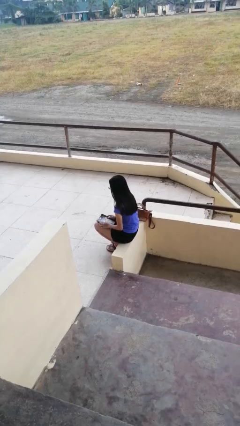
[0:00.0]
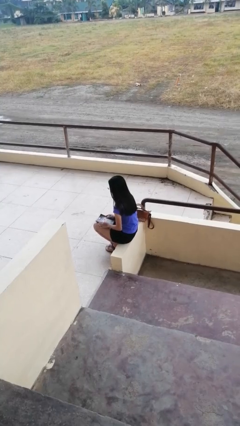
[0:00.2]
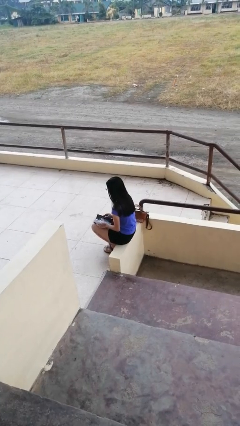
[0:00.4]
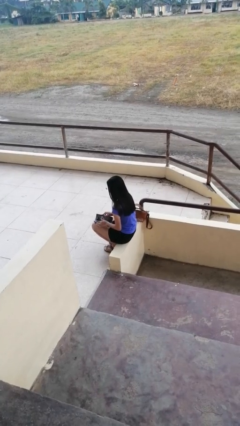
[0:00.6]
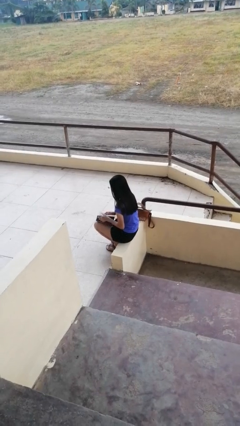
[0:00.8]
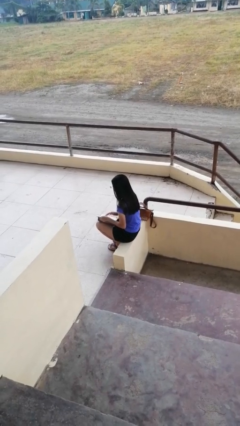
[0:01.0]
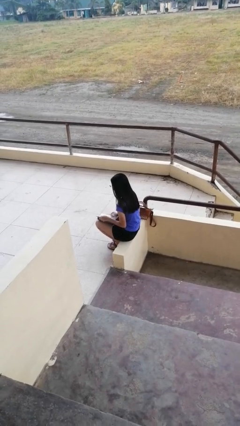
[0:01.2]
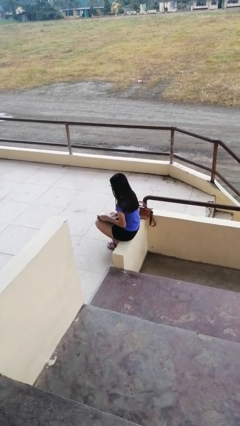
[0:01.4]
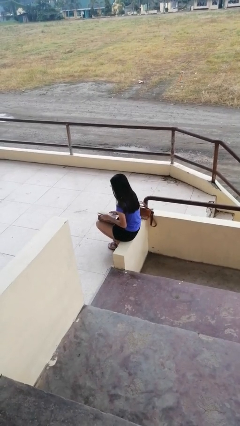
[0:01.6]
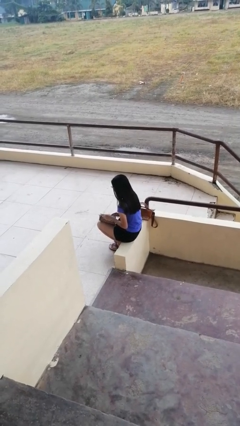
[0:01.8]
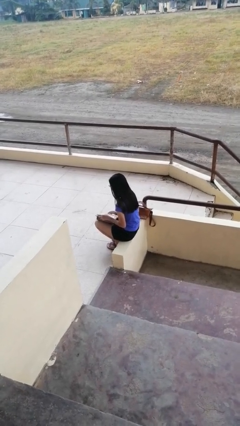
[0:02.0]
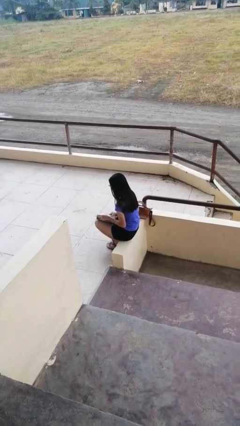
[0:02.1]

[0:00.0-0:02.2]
person reads book

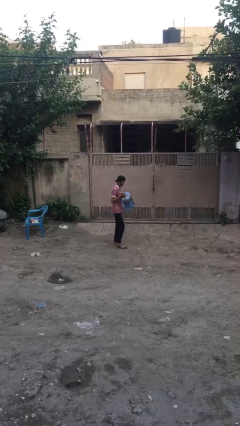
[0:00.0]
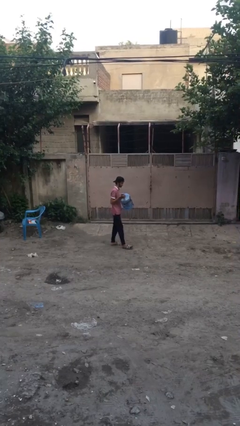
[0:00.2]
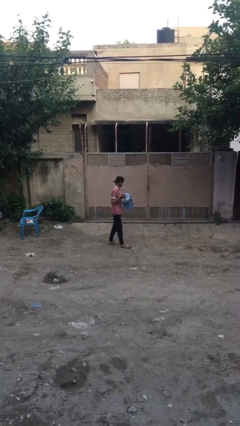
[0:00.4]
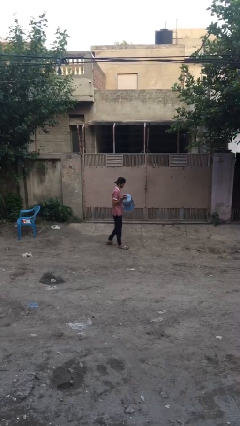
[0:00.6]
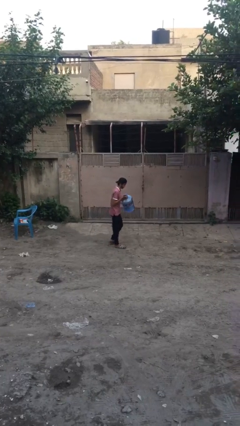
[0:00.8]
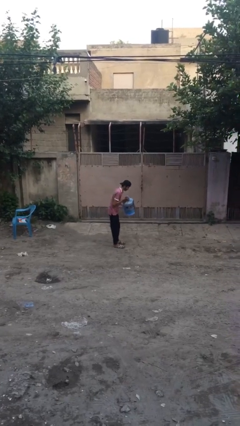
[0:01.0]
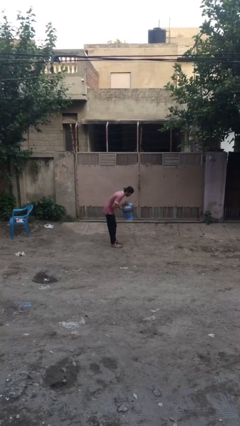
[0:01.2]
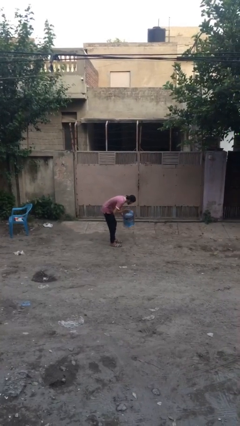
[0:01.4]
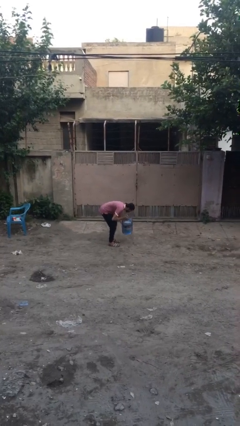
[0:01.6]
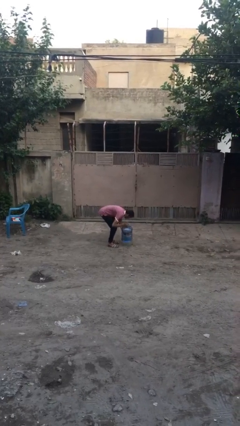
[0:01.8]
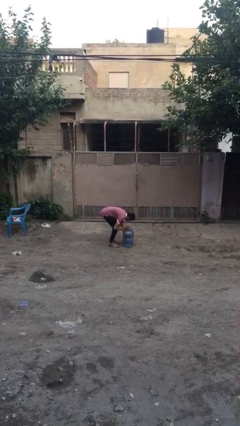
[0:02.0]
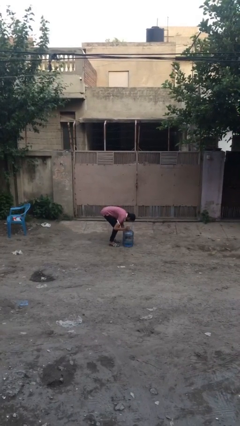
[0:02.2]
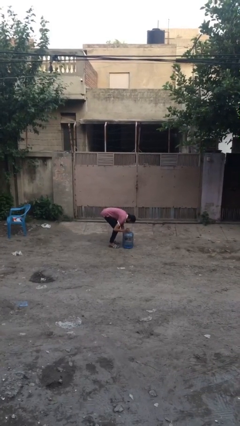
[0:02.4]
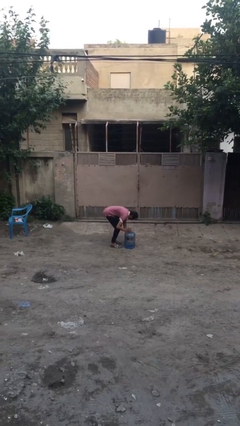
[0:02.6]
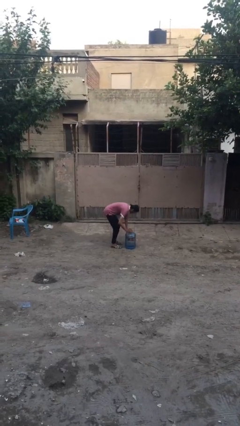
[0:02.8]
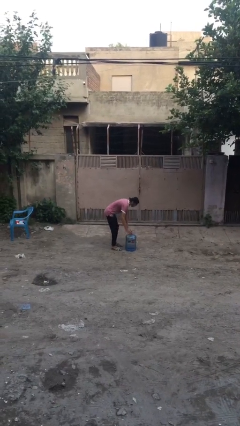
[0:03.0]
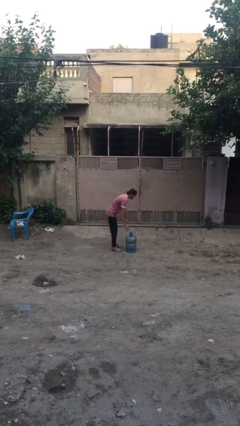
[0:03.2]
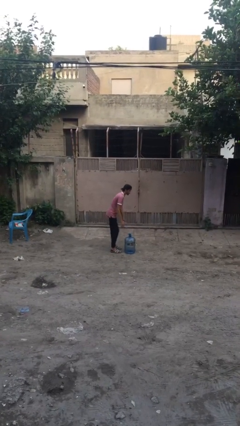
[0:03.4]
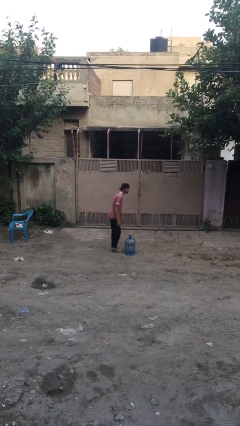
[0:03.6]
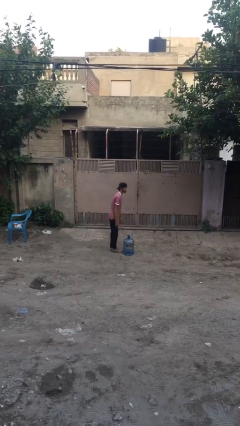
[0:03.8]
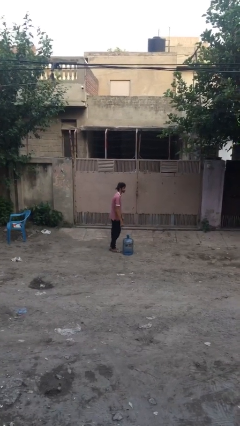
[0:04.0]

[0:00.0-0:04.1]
person puts down object on floor

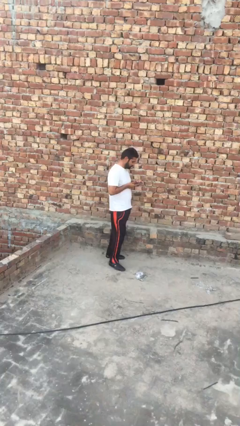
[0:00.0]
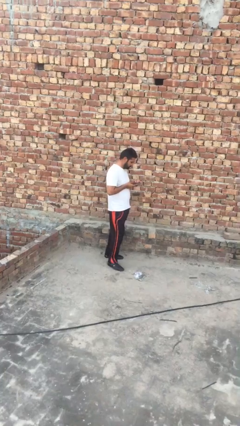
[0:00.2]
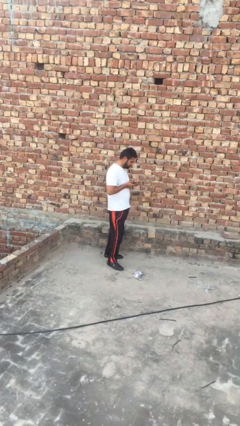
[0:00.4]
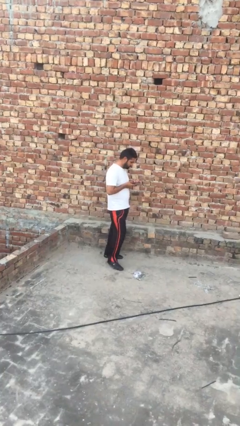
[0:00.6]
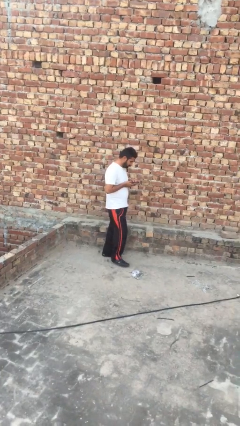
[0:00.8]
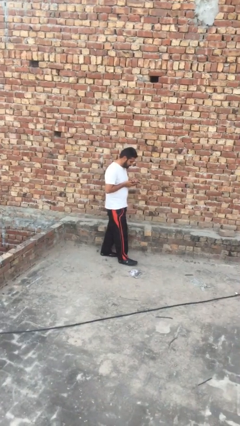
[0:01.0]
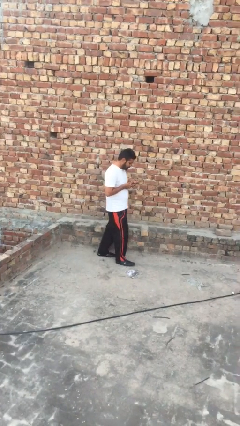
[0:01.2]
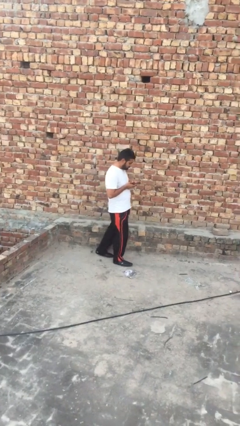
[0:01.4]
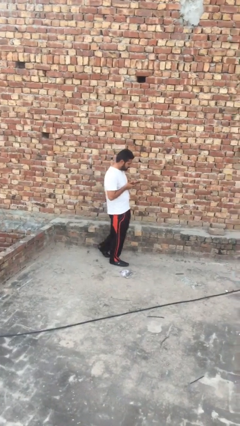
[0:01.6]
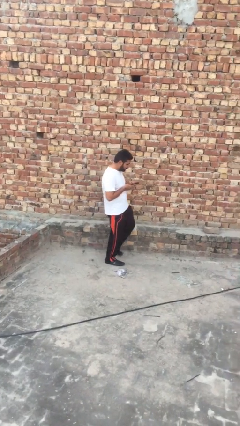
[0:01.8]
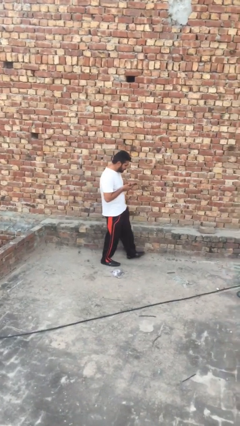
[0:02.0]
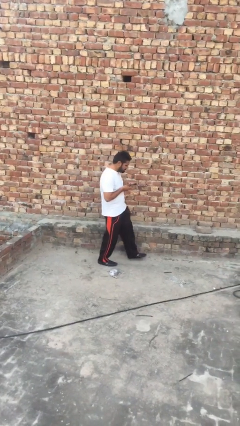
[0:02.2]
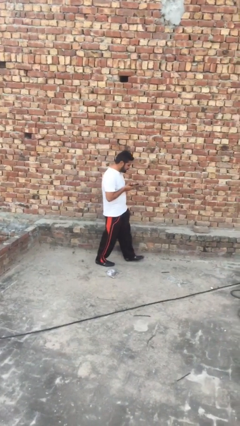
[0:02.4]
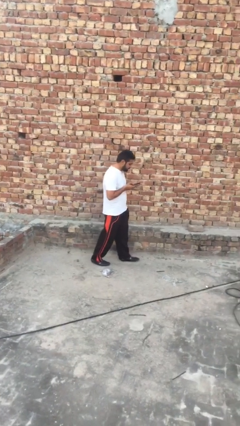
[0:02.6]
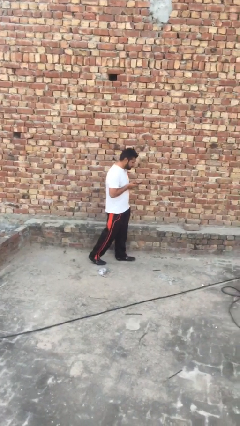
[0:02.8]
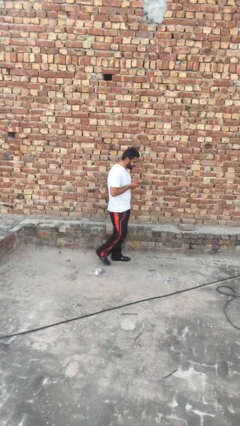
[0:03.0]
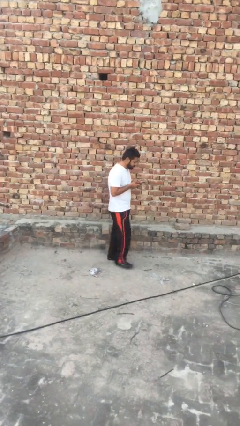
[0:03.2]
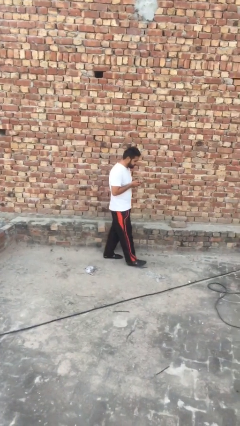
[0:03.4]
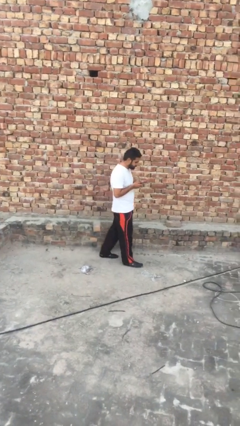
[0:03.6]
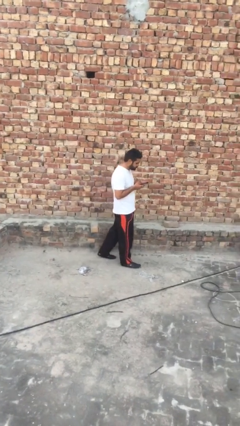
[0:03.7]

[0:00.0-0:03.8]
person texts on phone

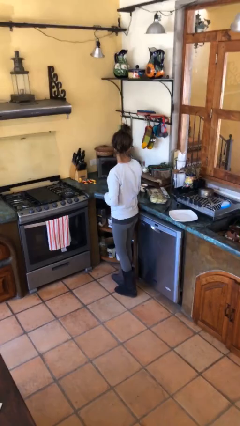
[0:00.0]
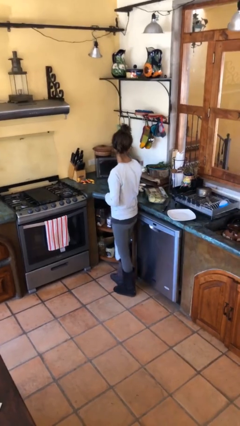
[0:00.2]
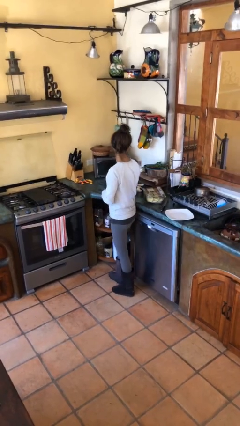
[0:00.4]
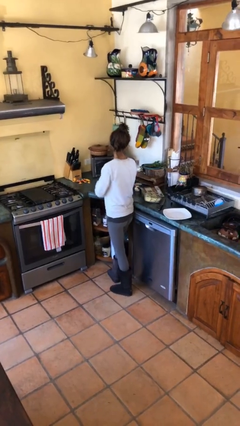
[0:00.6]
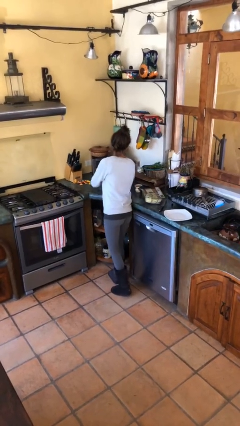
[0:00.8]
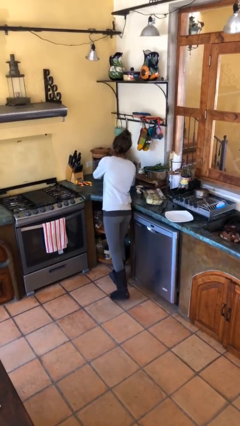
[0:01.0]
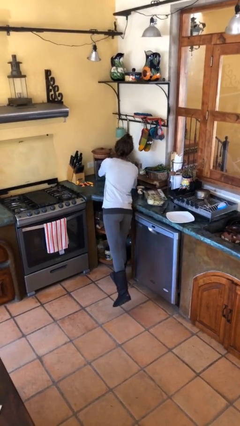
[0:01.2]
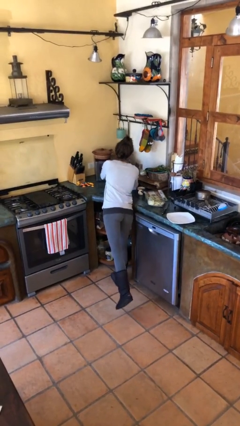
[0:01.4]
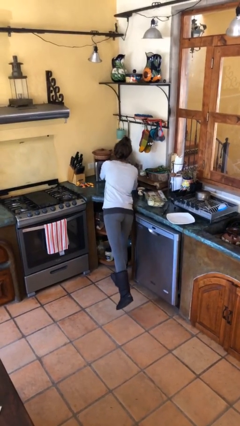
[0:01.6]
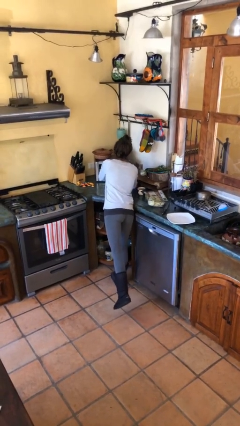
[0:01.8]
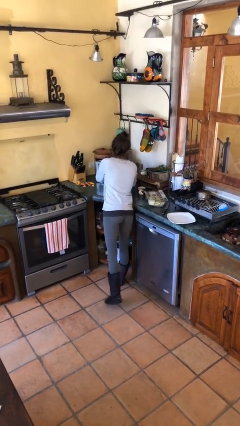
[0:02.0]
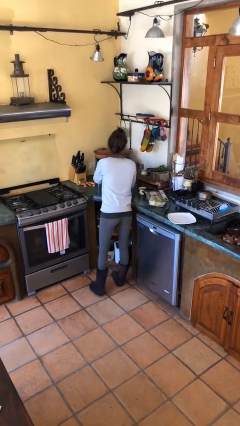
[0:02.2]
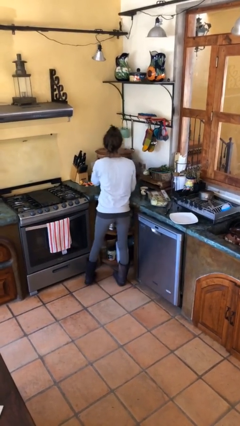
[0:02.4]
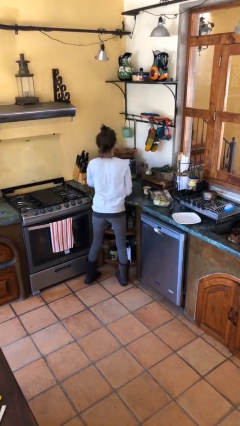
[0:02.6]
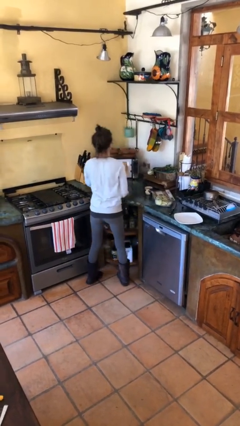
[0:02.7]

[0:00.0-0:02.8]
person opens microwave

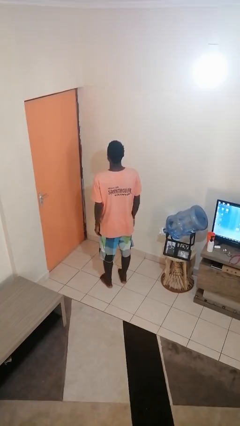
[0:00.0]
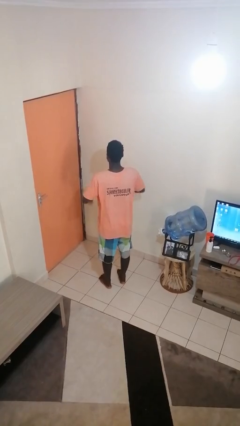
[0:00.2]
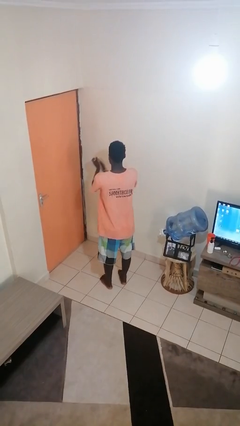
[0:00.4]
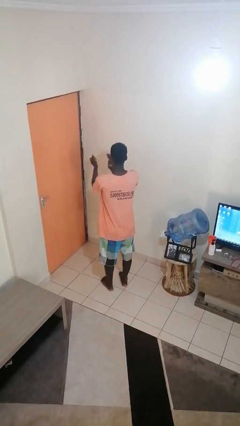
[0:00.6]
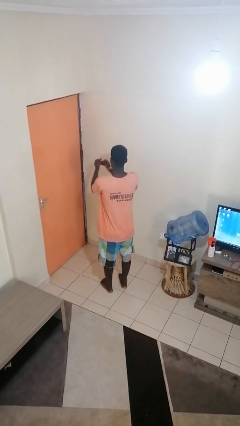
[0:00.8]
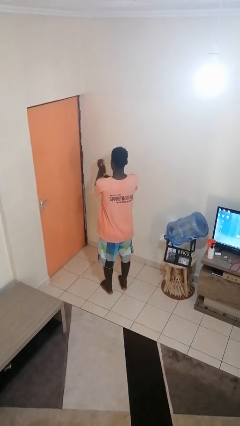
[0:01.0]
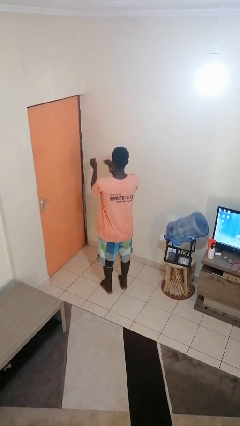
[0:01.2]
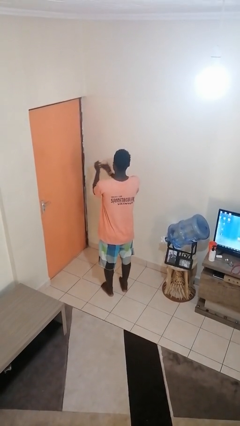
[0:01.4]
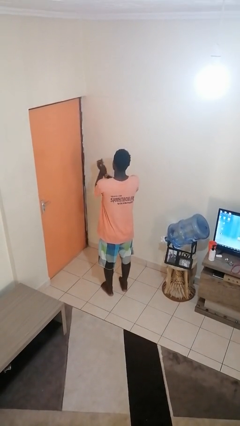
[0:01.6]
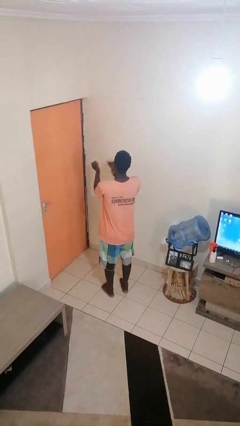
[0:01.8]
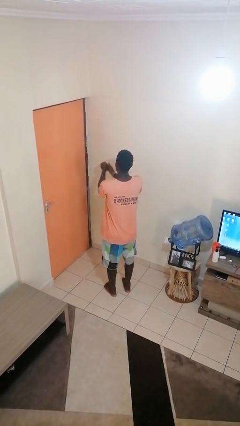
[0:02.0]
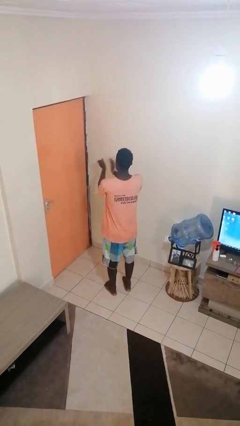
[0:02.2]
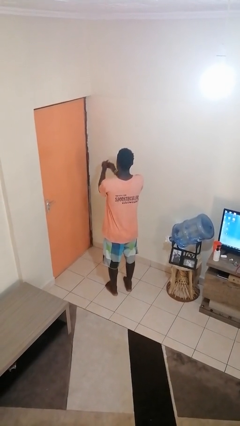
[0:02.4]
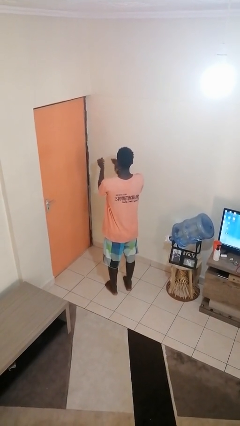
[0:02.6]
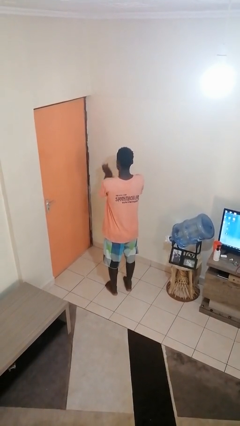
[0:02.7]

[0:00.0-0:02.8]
person claps hands

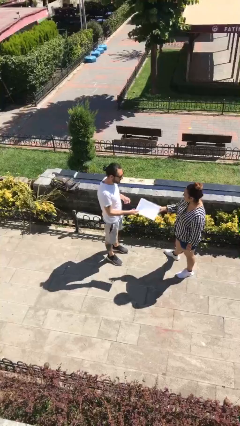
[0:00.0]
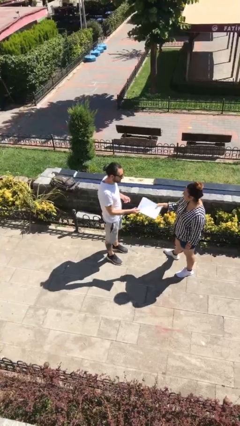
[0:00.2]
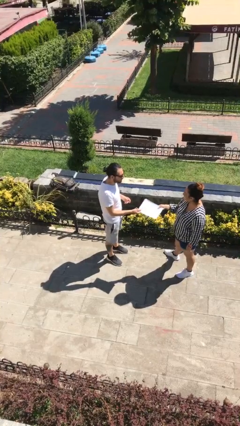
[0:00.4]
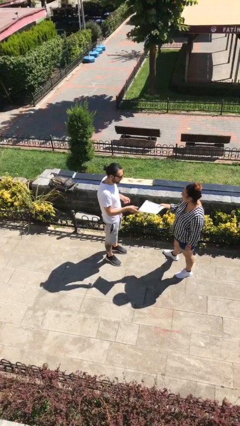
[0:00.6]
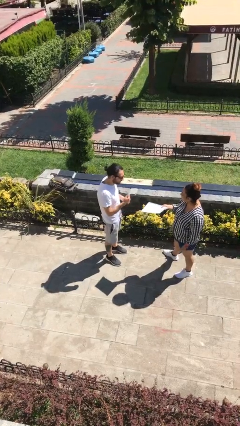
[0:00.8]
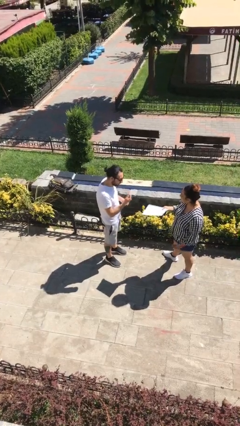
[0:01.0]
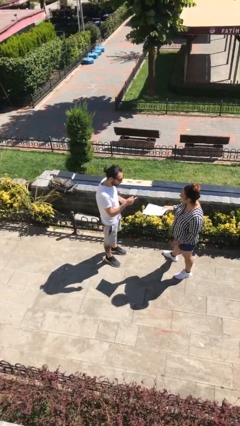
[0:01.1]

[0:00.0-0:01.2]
person transfers object to person

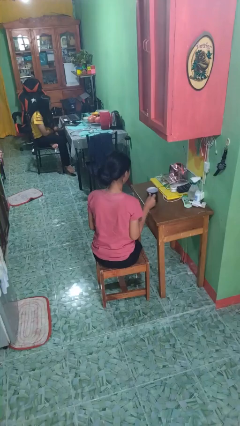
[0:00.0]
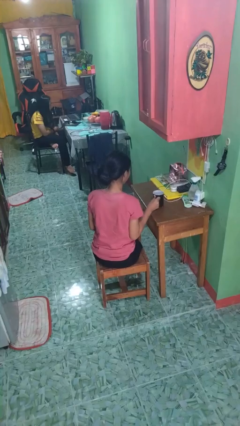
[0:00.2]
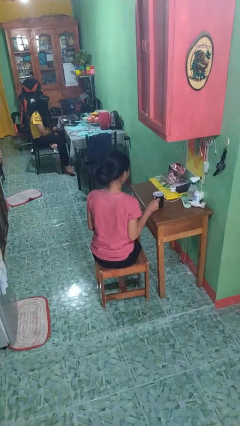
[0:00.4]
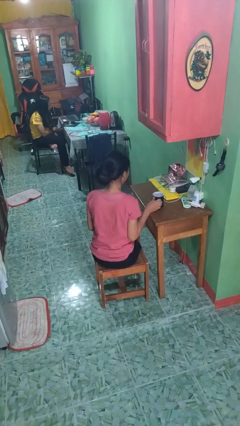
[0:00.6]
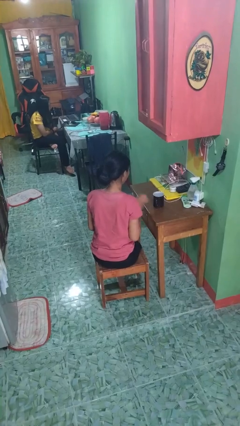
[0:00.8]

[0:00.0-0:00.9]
person puts down object on table
